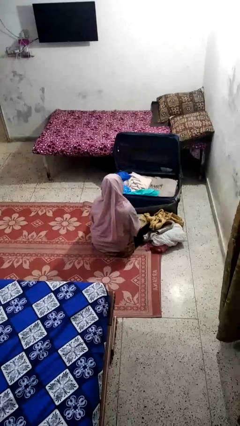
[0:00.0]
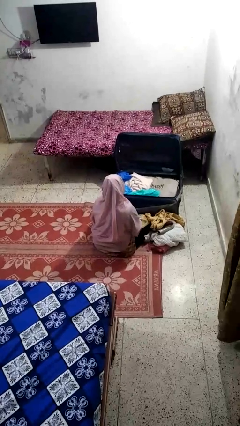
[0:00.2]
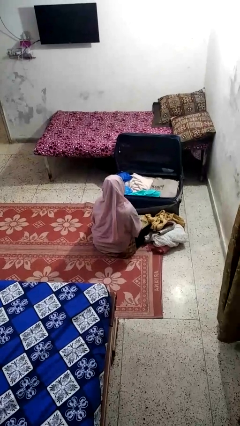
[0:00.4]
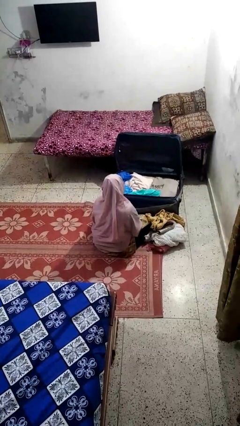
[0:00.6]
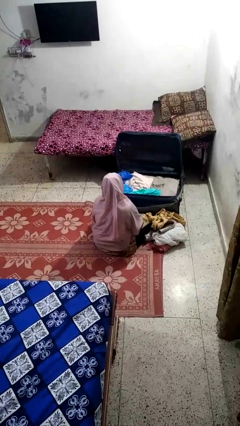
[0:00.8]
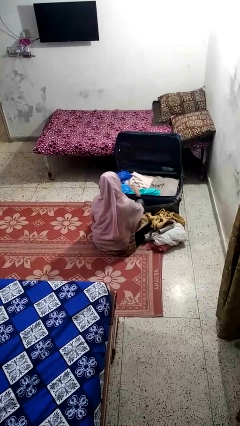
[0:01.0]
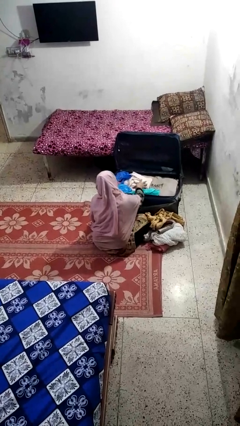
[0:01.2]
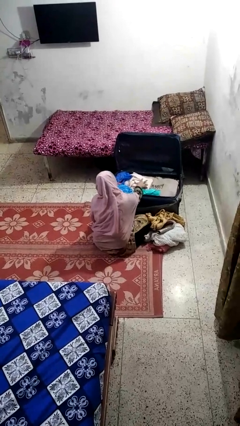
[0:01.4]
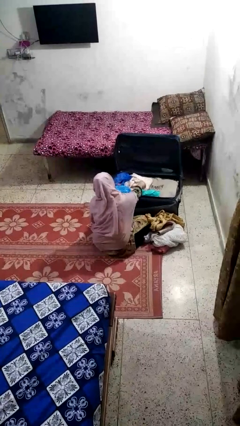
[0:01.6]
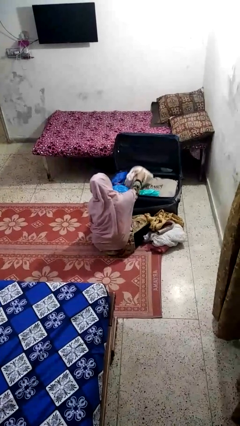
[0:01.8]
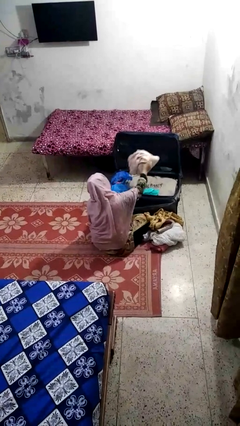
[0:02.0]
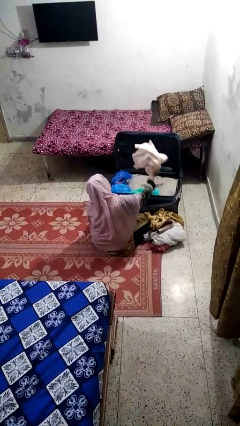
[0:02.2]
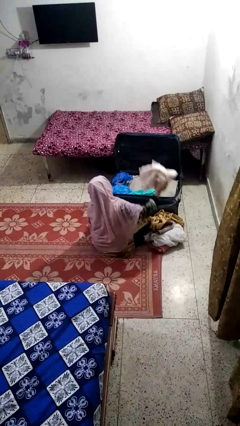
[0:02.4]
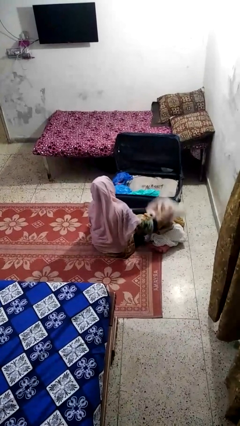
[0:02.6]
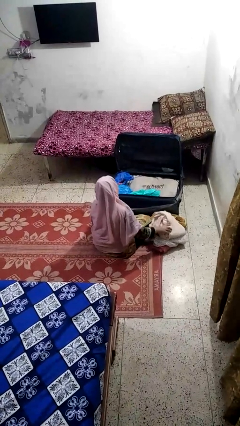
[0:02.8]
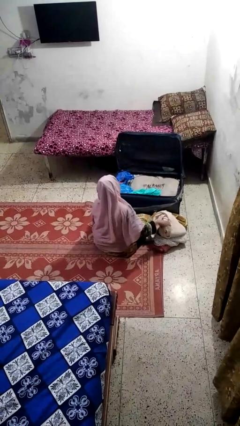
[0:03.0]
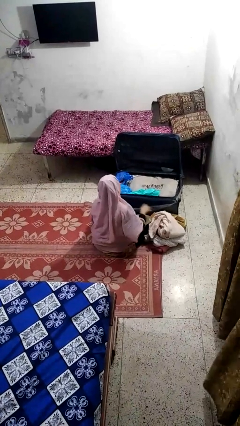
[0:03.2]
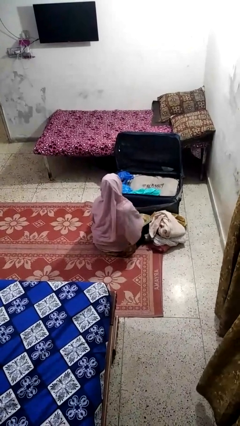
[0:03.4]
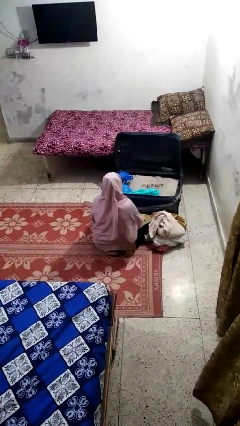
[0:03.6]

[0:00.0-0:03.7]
person unloads clothes from suitcase

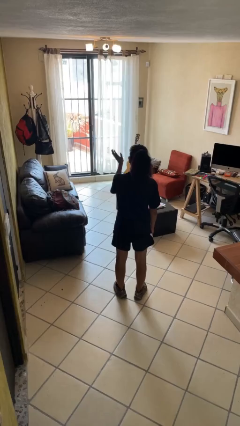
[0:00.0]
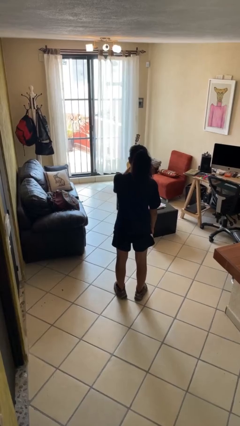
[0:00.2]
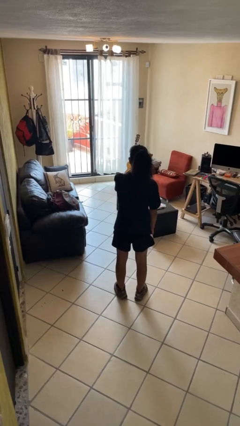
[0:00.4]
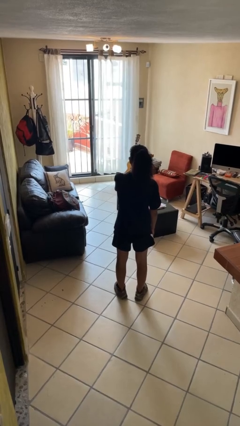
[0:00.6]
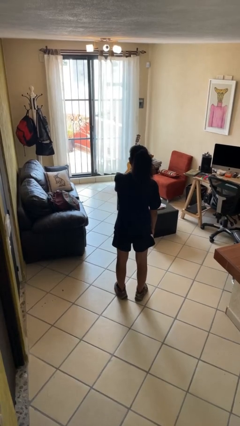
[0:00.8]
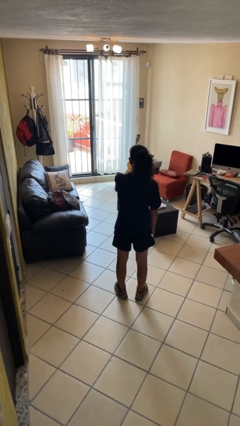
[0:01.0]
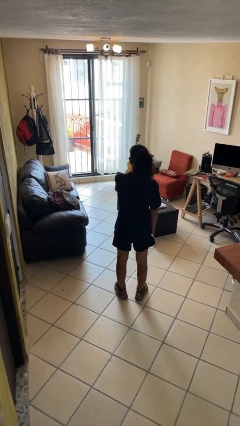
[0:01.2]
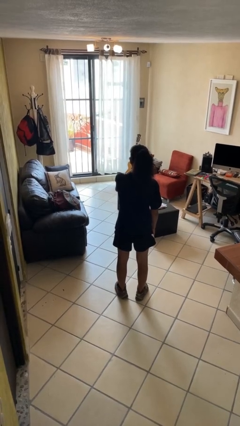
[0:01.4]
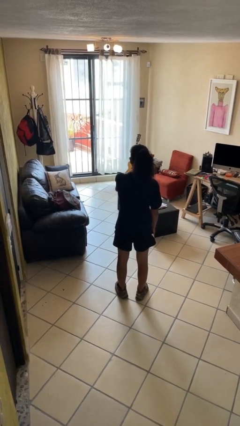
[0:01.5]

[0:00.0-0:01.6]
person gestures swipe right

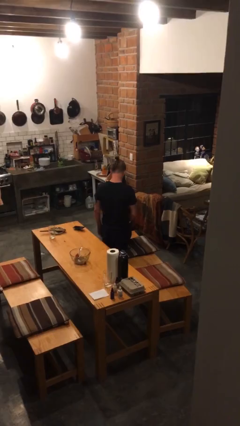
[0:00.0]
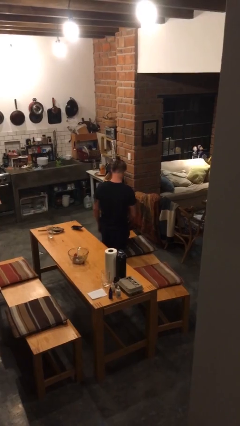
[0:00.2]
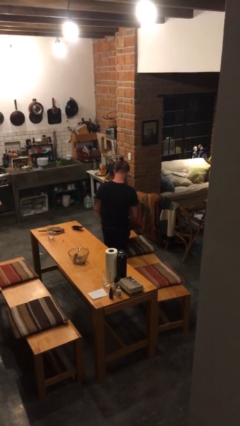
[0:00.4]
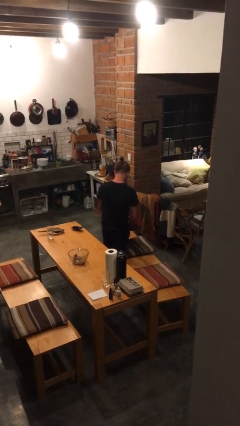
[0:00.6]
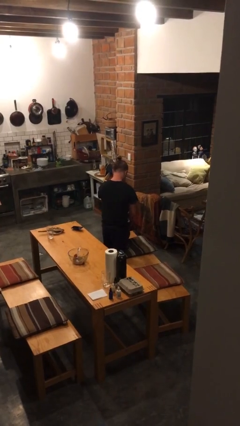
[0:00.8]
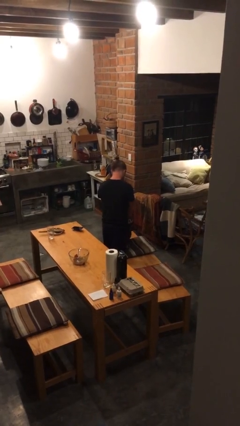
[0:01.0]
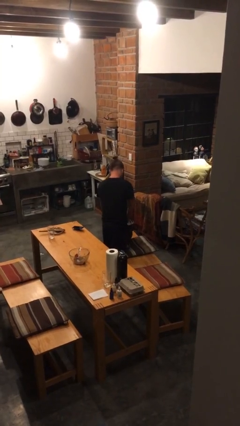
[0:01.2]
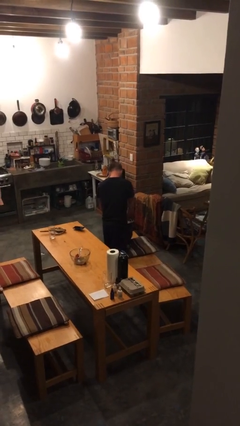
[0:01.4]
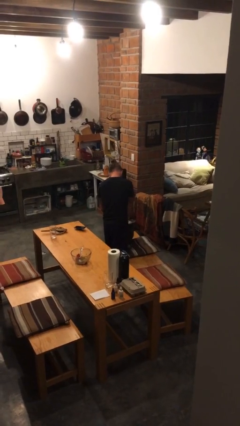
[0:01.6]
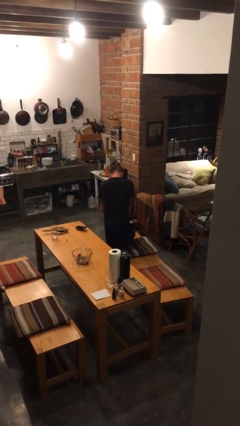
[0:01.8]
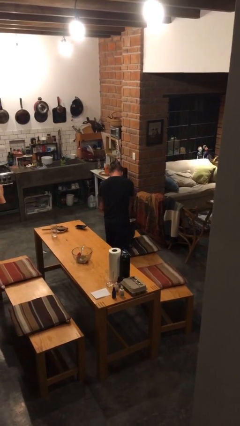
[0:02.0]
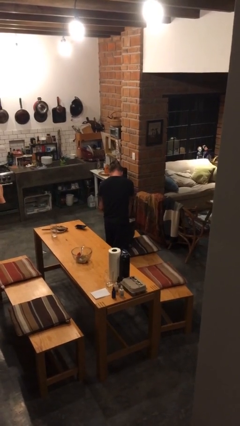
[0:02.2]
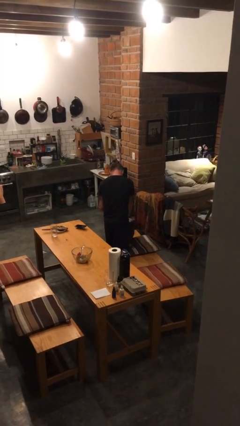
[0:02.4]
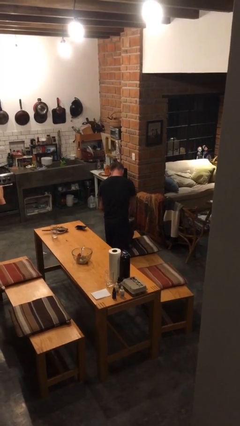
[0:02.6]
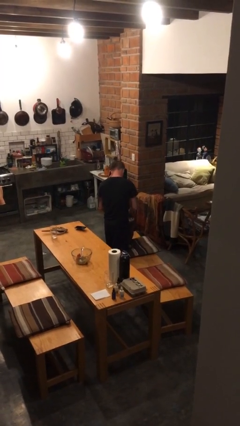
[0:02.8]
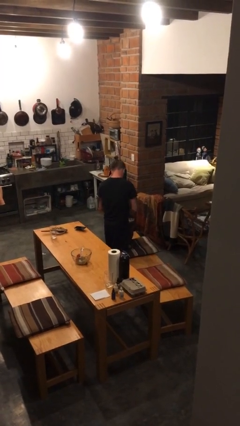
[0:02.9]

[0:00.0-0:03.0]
person searches in bag

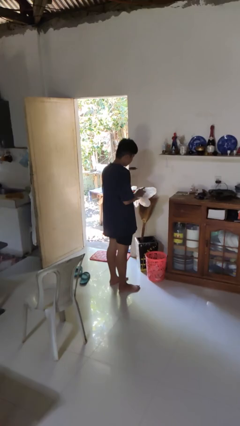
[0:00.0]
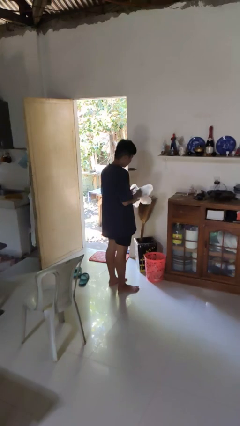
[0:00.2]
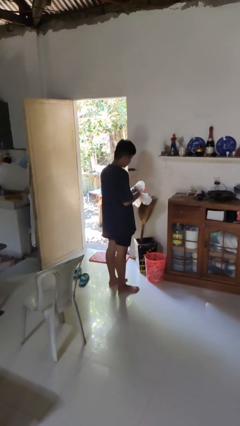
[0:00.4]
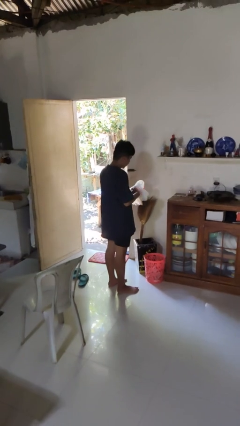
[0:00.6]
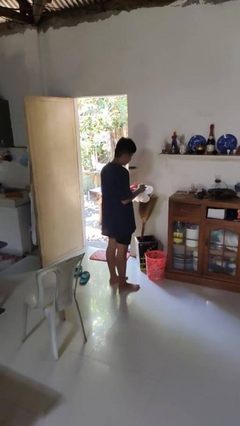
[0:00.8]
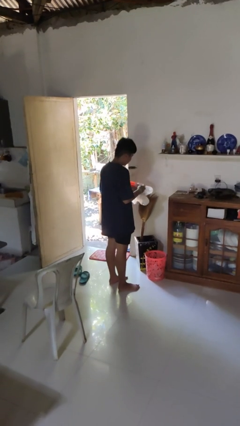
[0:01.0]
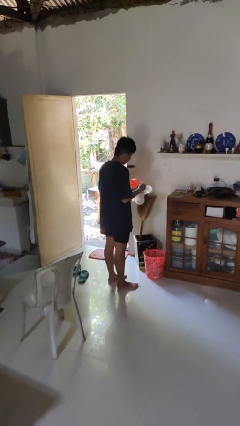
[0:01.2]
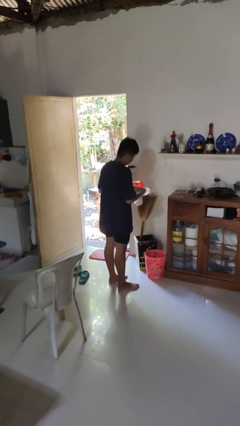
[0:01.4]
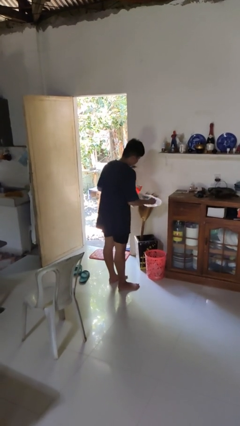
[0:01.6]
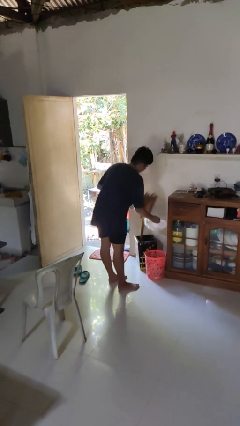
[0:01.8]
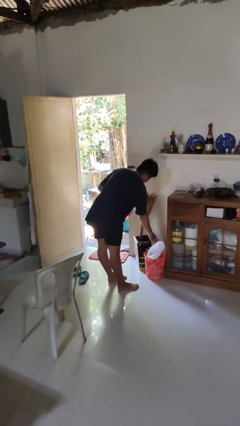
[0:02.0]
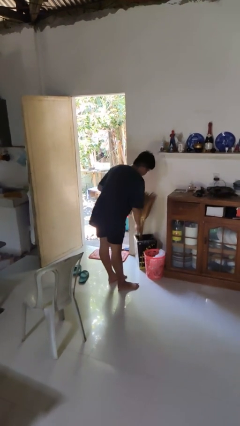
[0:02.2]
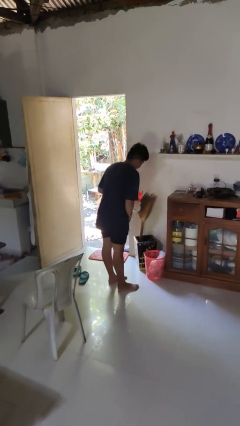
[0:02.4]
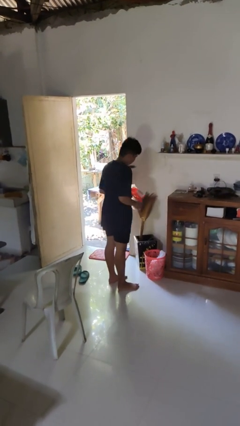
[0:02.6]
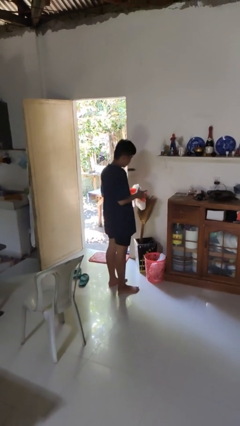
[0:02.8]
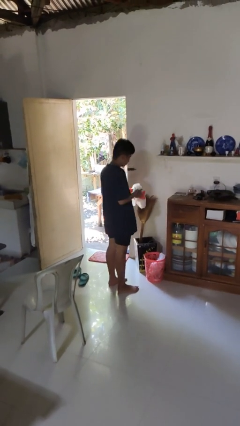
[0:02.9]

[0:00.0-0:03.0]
person discards trash

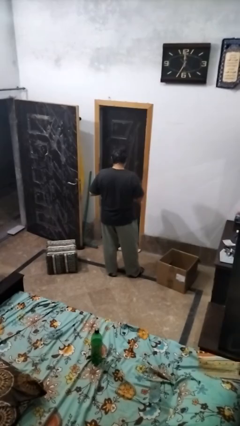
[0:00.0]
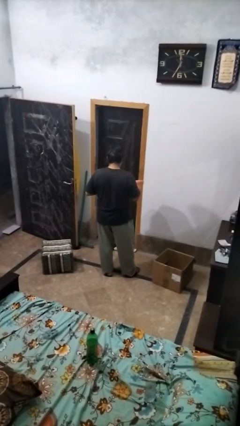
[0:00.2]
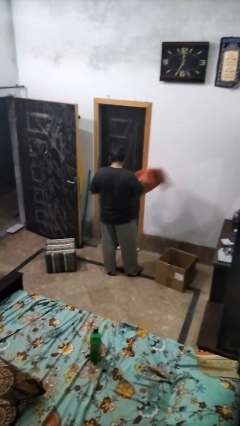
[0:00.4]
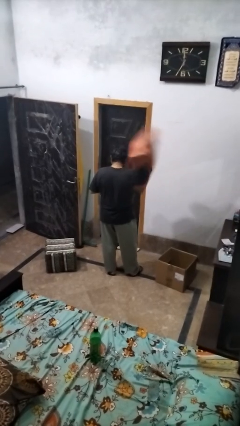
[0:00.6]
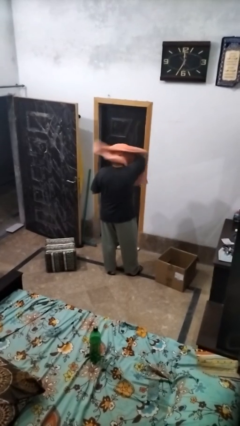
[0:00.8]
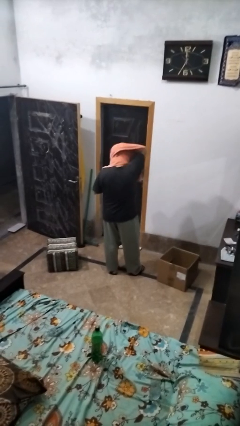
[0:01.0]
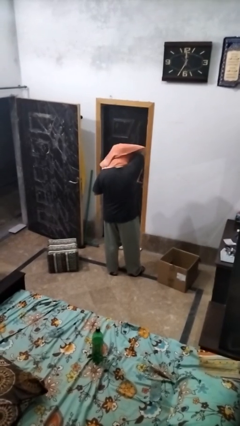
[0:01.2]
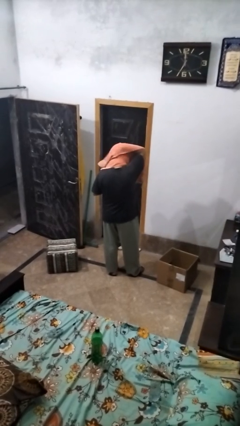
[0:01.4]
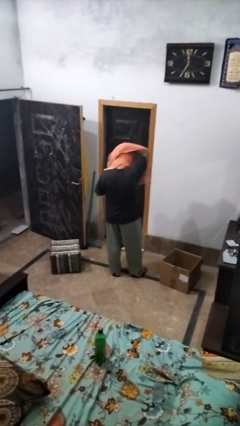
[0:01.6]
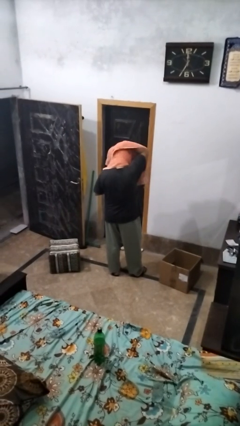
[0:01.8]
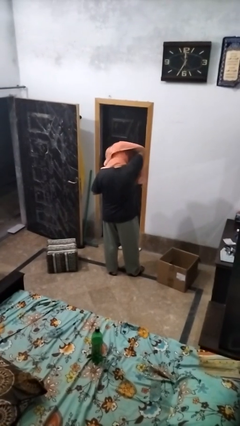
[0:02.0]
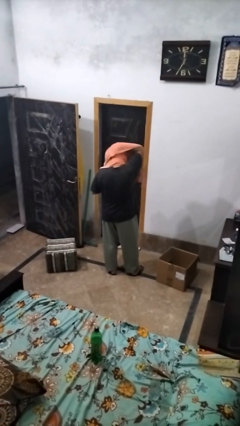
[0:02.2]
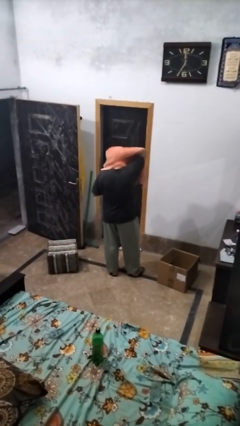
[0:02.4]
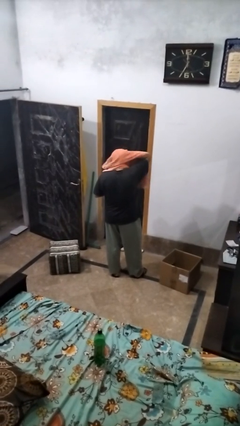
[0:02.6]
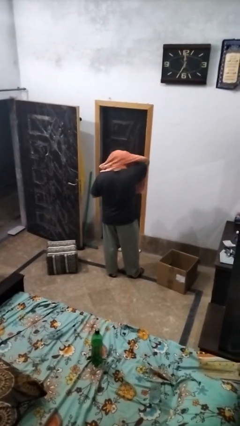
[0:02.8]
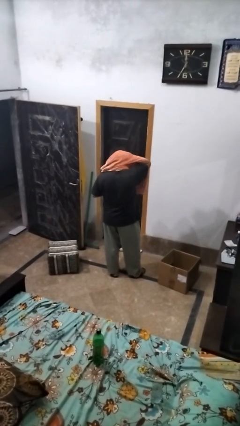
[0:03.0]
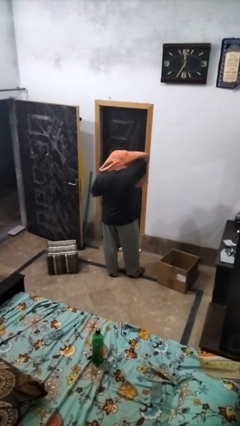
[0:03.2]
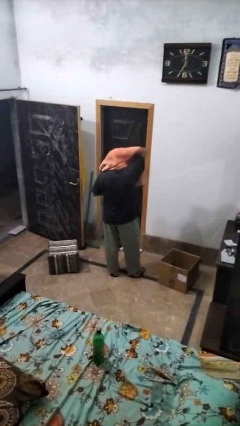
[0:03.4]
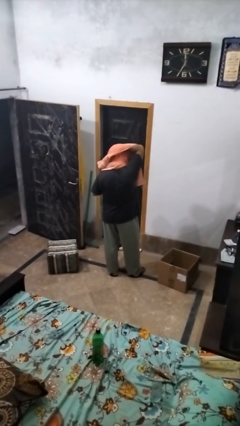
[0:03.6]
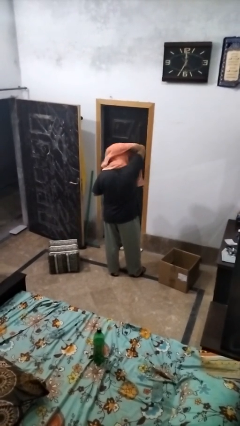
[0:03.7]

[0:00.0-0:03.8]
person dries hair with towel

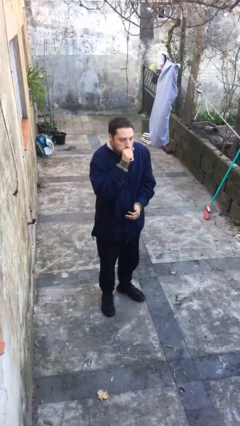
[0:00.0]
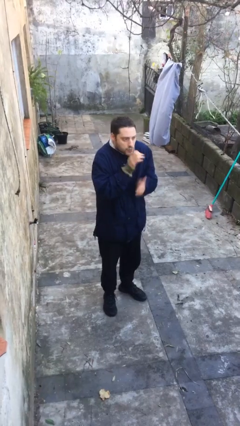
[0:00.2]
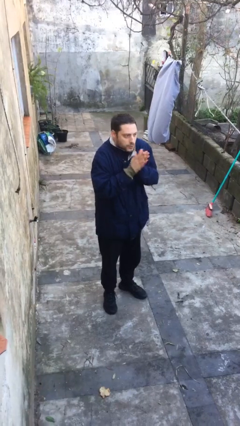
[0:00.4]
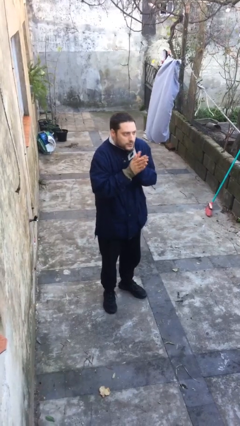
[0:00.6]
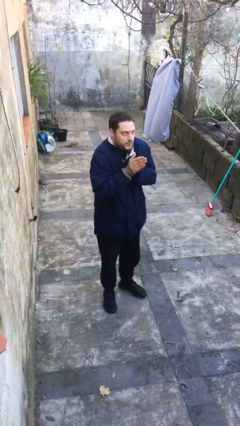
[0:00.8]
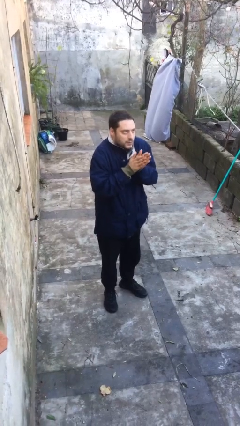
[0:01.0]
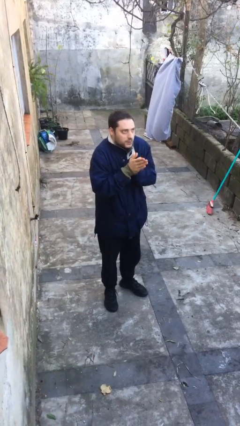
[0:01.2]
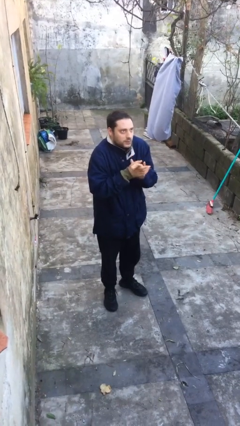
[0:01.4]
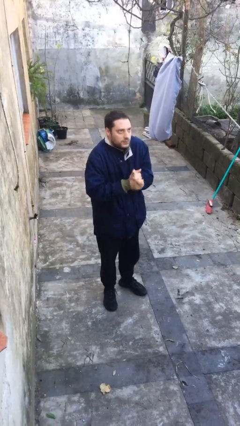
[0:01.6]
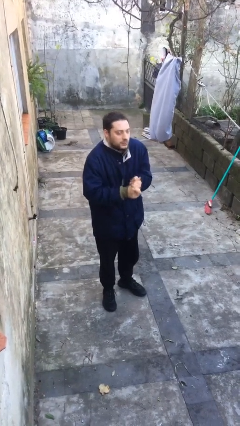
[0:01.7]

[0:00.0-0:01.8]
person blows into hands

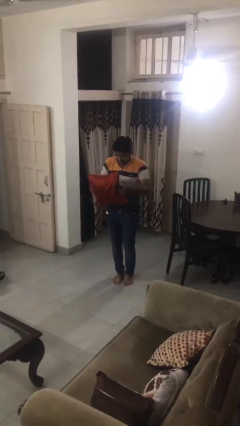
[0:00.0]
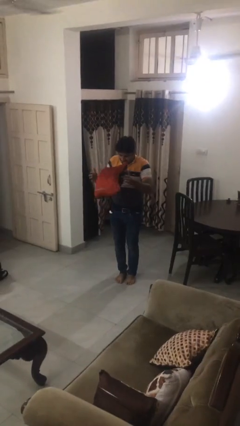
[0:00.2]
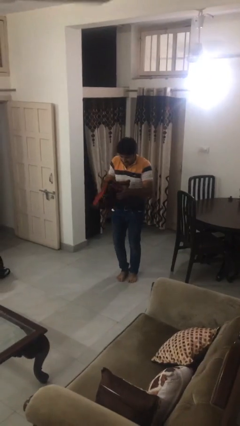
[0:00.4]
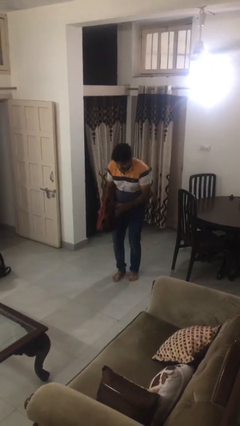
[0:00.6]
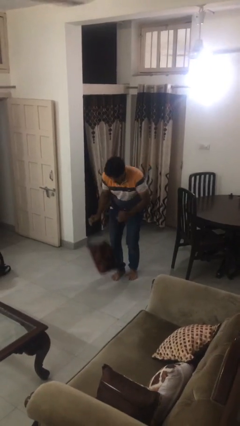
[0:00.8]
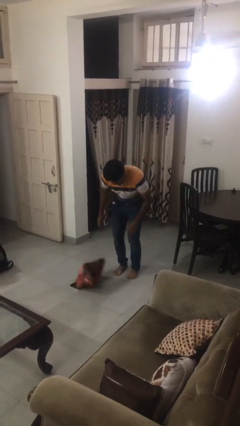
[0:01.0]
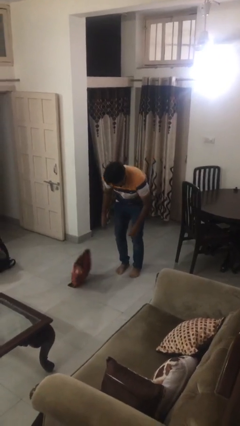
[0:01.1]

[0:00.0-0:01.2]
person drops object
